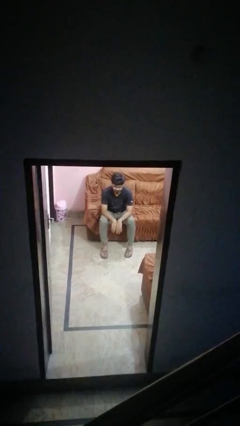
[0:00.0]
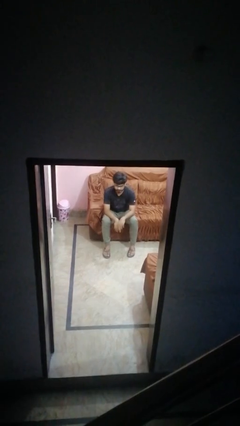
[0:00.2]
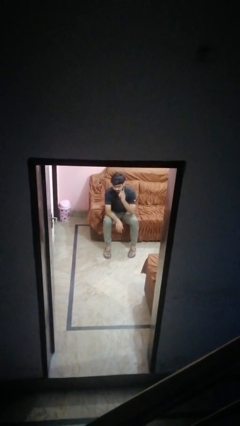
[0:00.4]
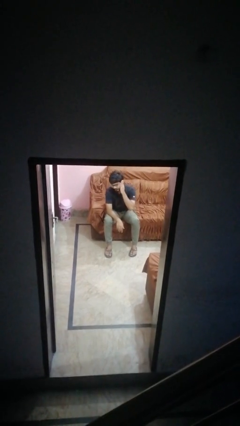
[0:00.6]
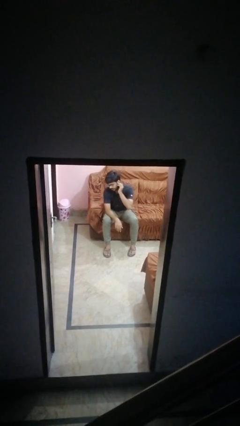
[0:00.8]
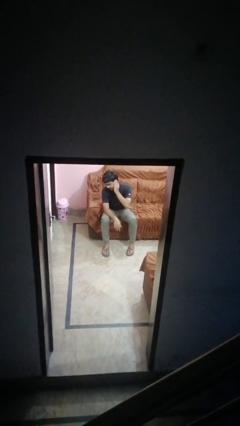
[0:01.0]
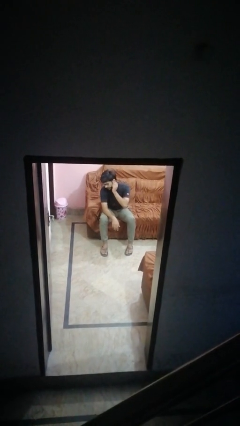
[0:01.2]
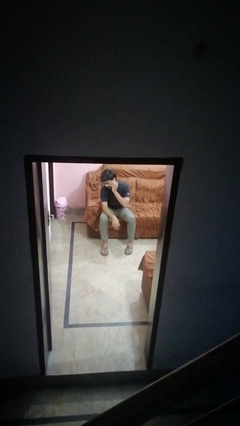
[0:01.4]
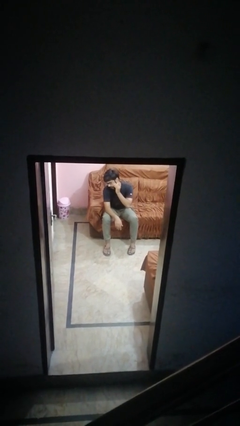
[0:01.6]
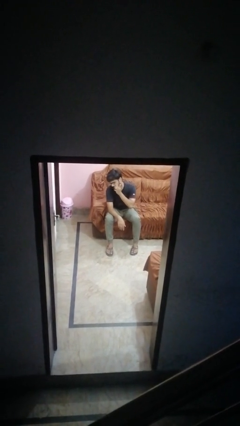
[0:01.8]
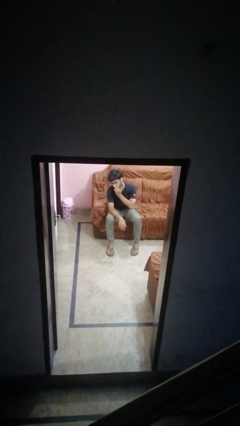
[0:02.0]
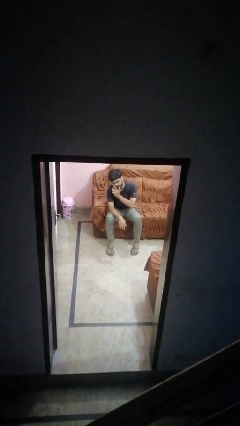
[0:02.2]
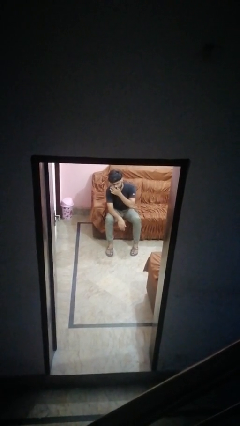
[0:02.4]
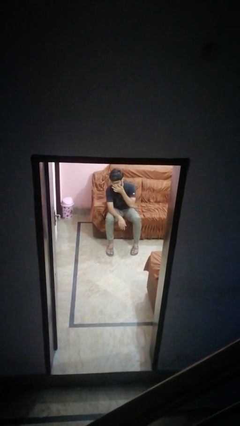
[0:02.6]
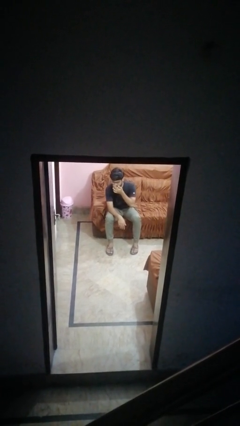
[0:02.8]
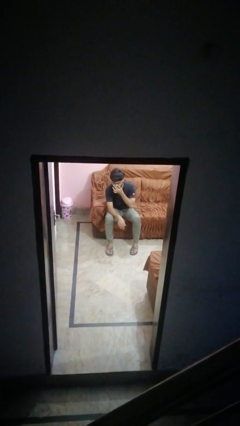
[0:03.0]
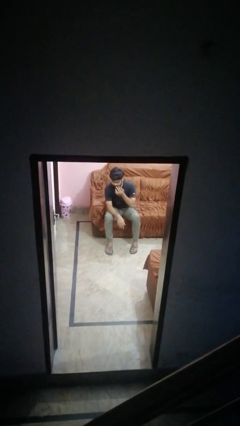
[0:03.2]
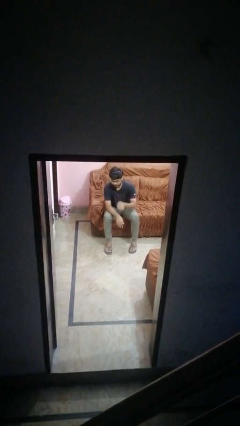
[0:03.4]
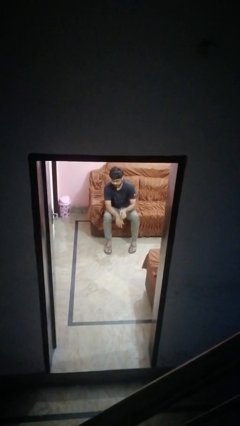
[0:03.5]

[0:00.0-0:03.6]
person scratches face

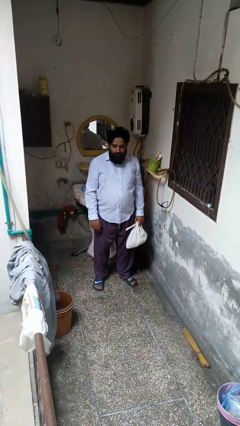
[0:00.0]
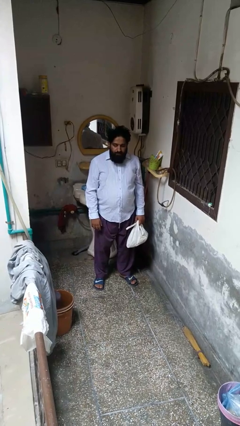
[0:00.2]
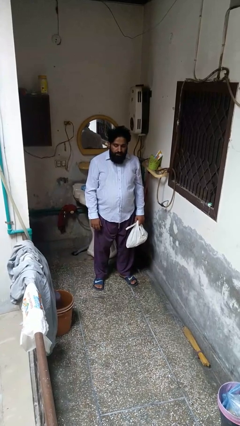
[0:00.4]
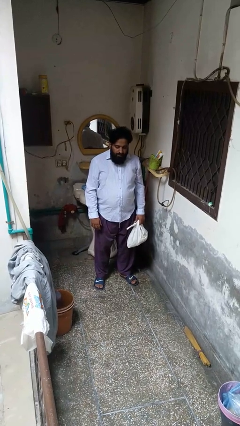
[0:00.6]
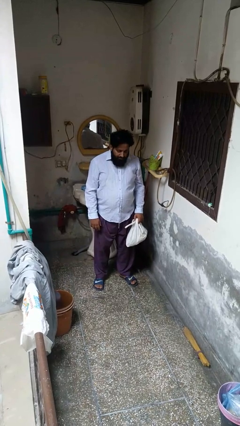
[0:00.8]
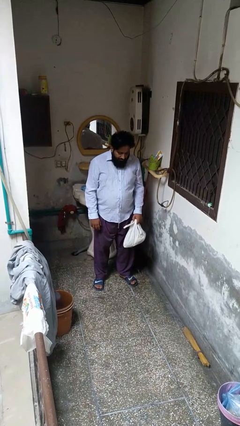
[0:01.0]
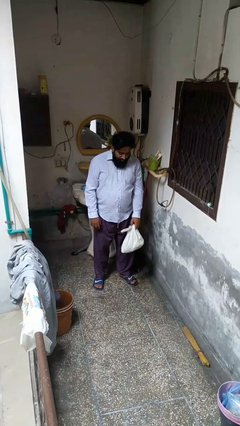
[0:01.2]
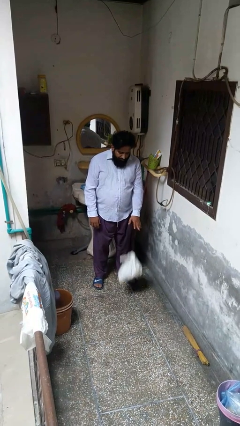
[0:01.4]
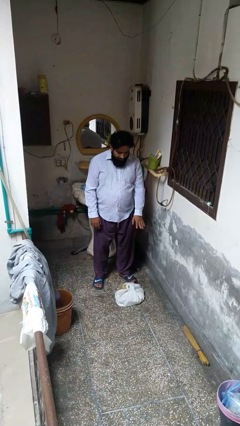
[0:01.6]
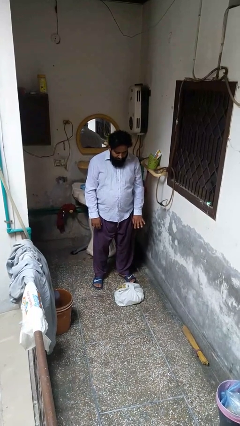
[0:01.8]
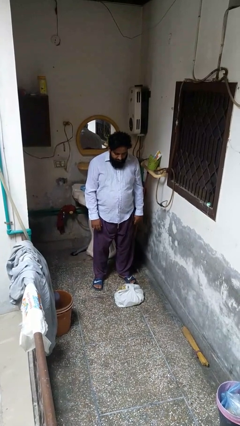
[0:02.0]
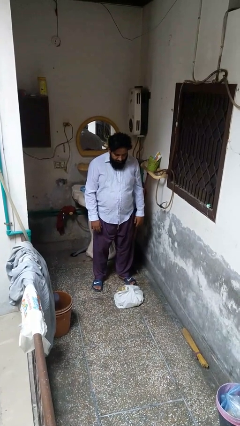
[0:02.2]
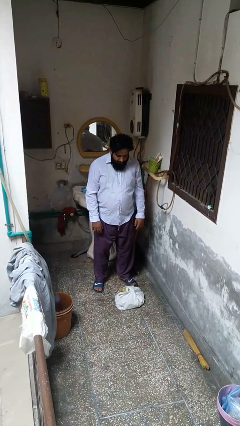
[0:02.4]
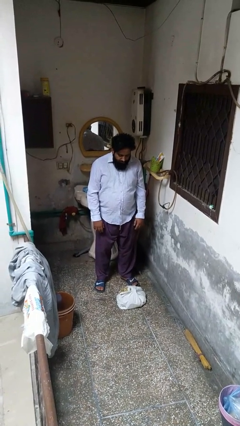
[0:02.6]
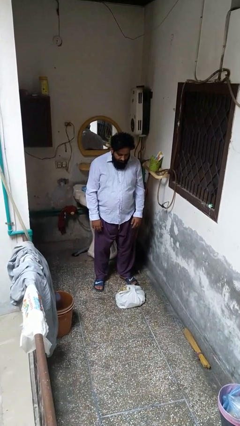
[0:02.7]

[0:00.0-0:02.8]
person throws object to ground

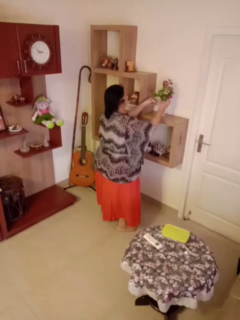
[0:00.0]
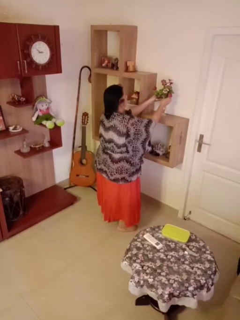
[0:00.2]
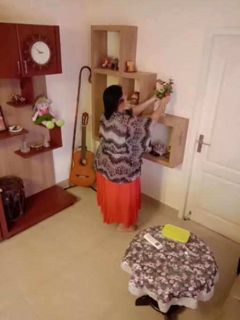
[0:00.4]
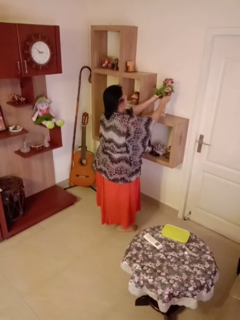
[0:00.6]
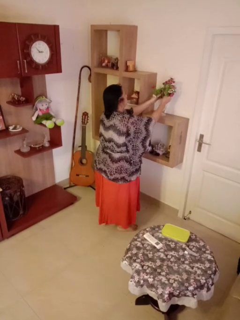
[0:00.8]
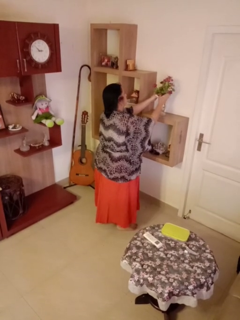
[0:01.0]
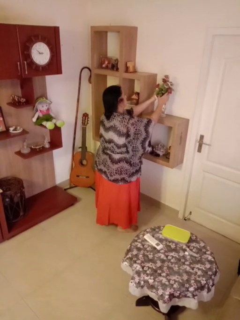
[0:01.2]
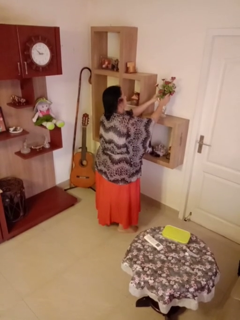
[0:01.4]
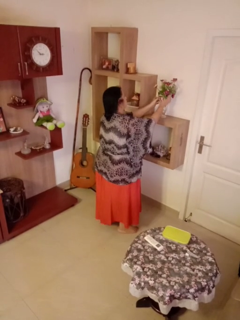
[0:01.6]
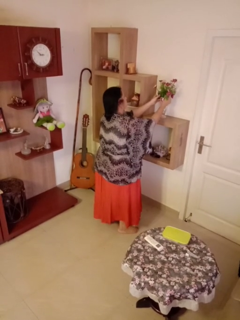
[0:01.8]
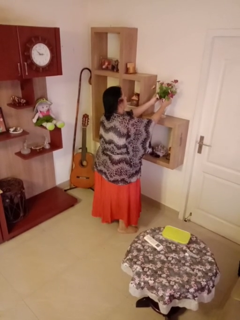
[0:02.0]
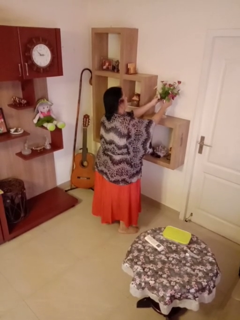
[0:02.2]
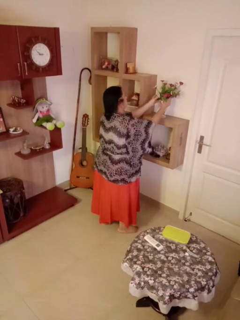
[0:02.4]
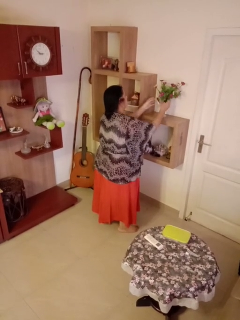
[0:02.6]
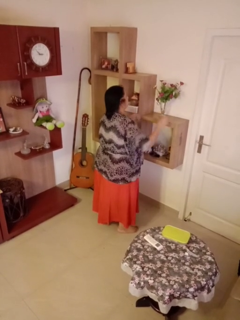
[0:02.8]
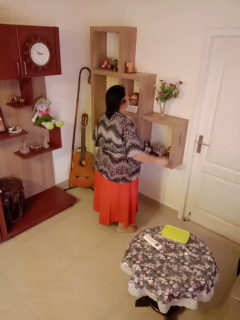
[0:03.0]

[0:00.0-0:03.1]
person arranges flowers in vase

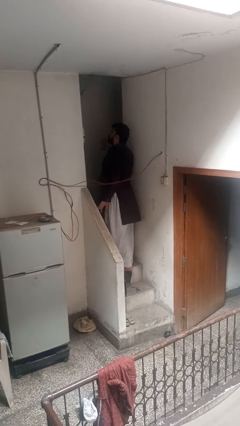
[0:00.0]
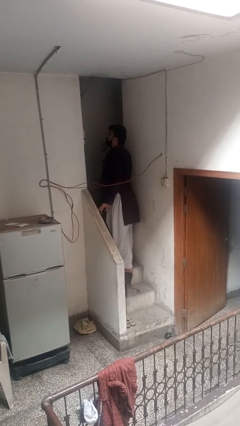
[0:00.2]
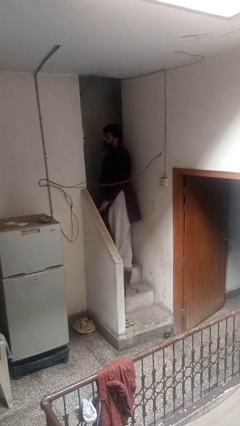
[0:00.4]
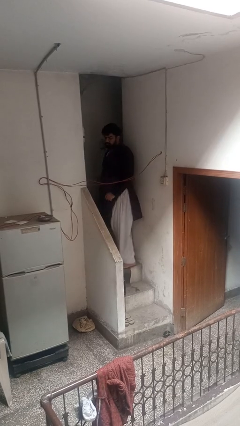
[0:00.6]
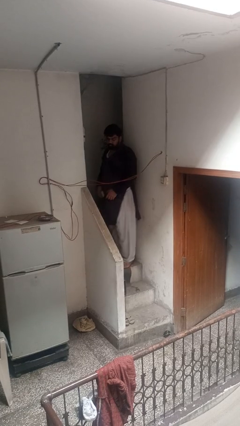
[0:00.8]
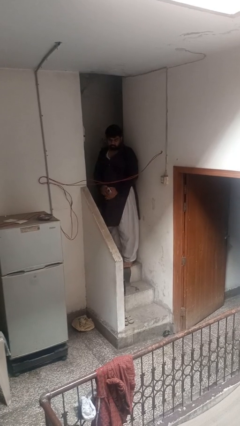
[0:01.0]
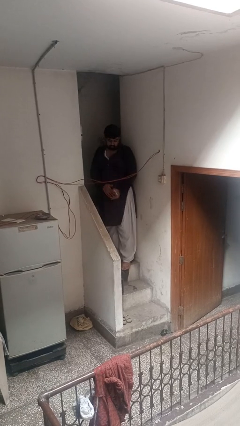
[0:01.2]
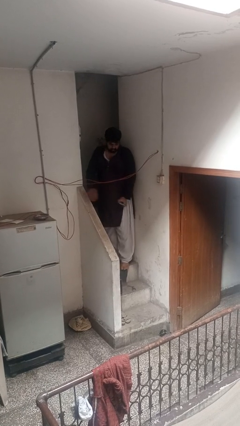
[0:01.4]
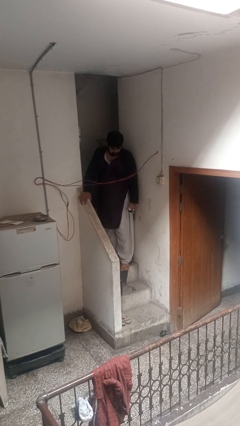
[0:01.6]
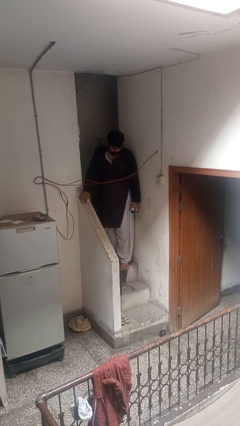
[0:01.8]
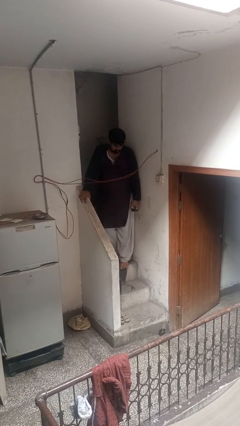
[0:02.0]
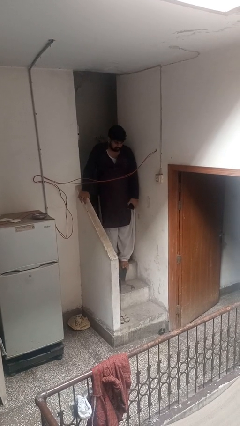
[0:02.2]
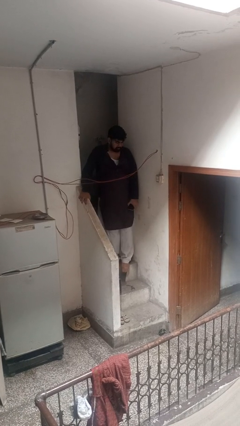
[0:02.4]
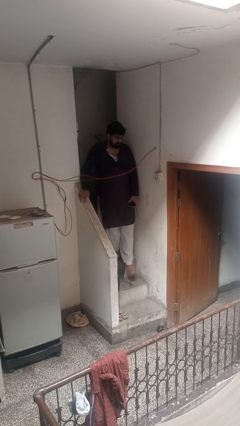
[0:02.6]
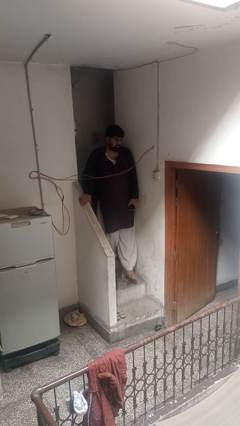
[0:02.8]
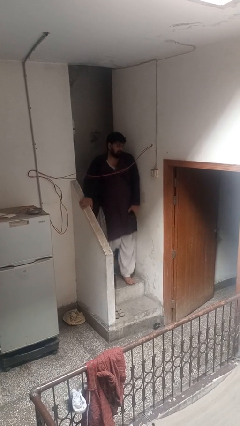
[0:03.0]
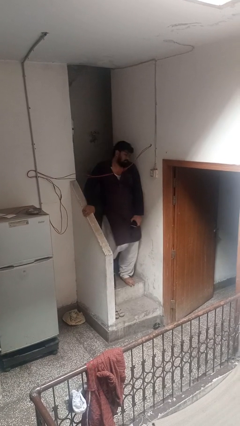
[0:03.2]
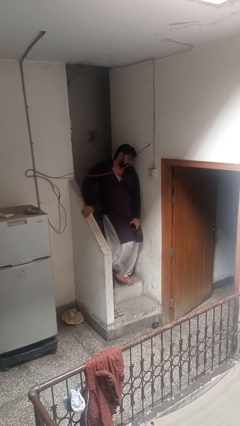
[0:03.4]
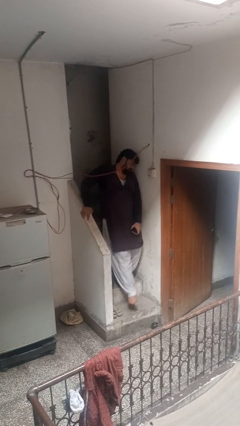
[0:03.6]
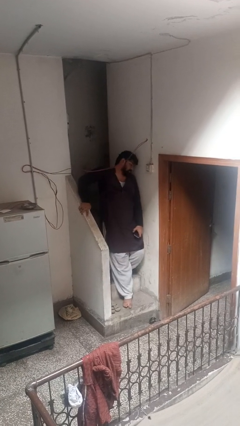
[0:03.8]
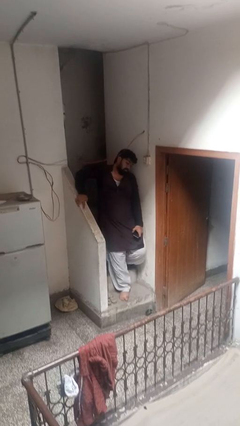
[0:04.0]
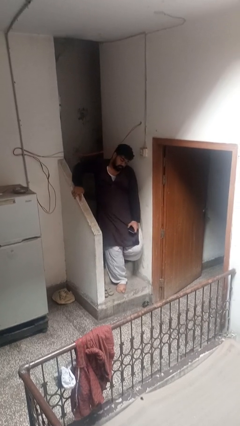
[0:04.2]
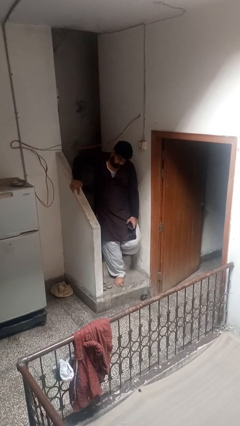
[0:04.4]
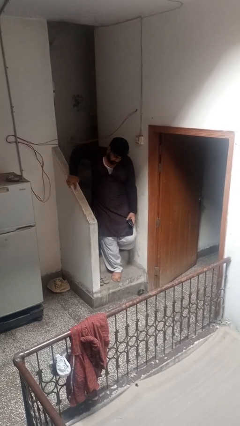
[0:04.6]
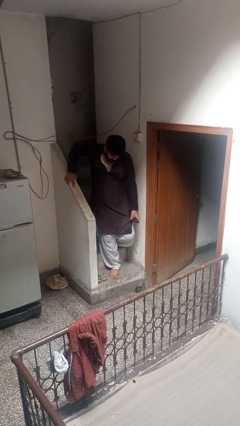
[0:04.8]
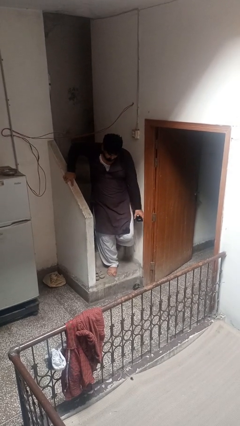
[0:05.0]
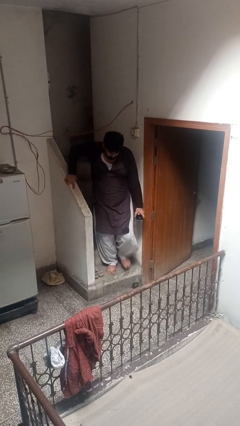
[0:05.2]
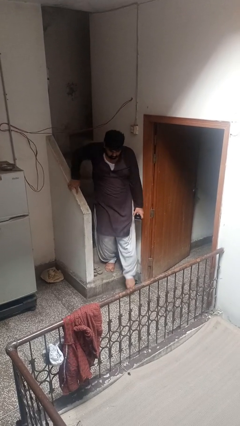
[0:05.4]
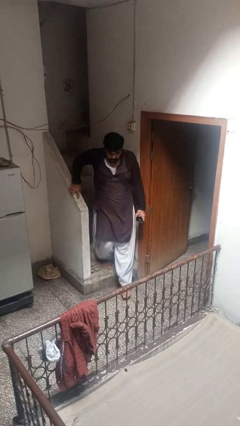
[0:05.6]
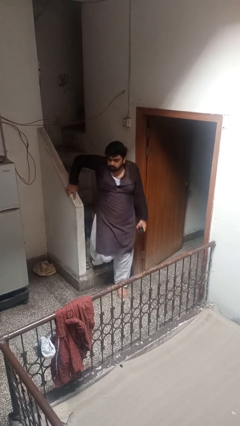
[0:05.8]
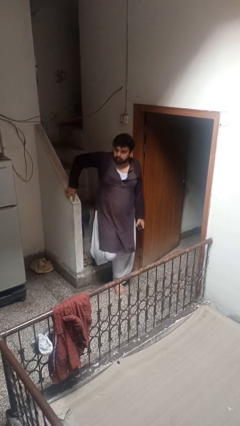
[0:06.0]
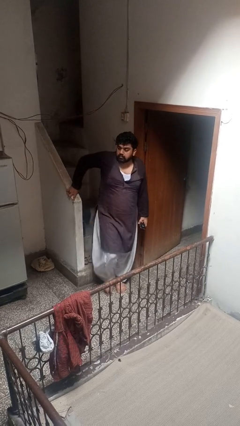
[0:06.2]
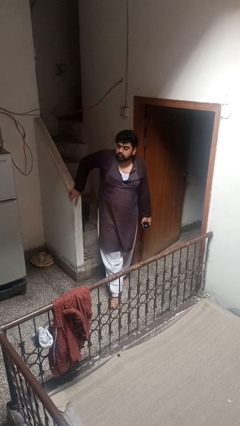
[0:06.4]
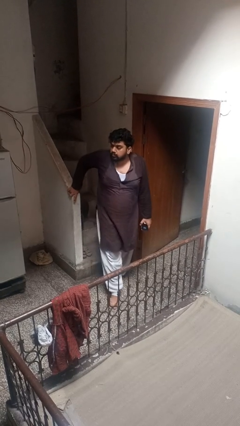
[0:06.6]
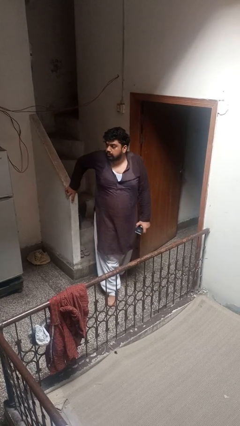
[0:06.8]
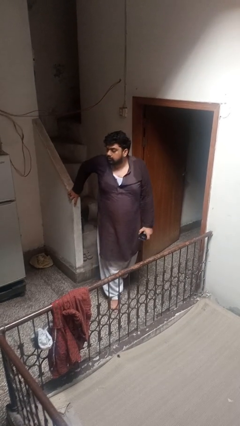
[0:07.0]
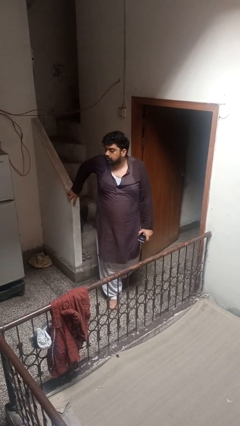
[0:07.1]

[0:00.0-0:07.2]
person climbs down stairs

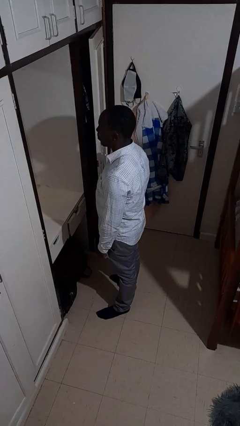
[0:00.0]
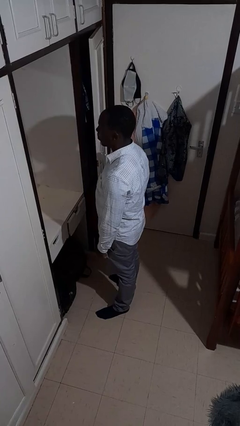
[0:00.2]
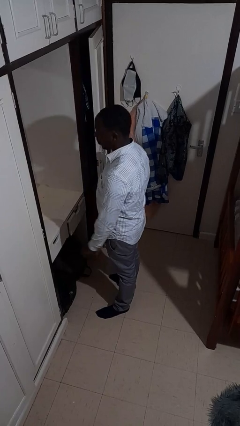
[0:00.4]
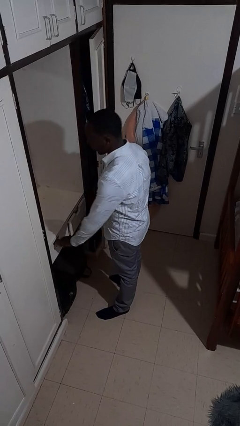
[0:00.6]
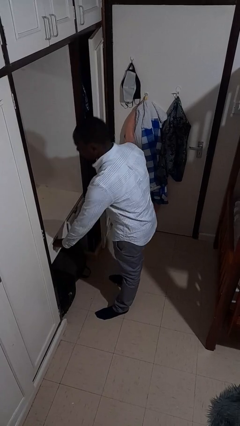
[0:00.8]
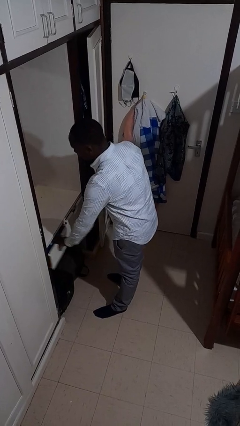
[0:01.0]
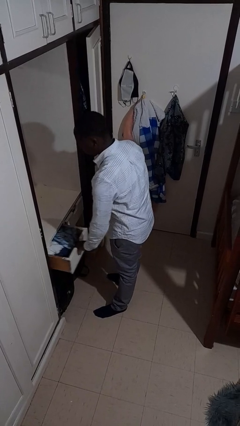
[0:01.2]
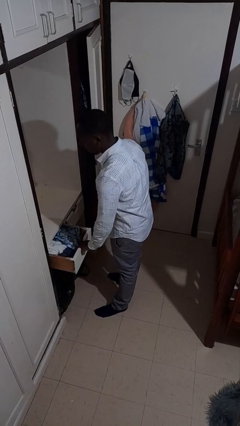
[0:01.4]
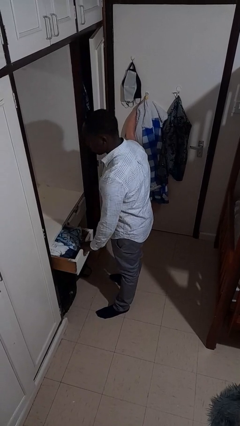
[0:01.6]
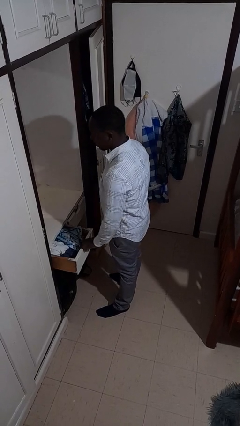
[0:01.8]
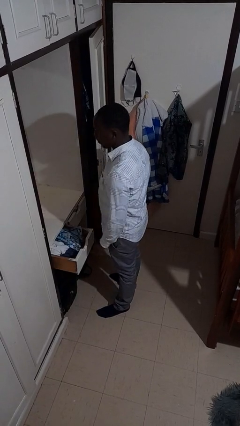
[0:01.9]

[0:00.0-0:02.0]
person opens dresser drawer
